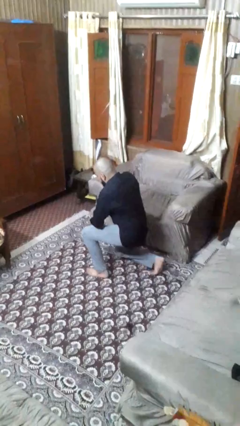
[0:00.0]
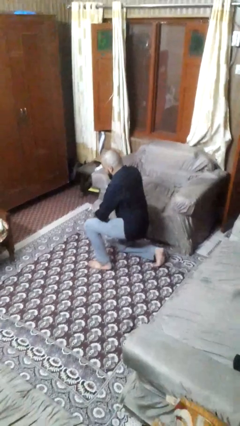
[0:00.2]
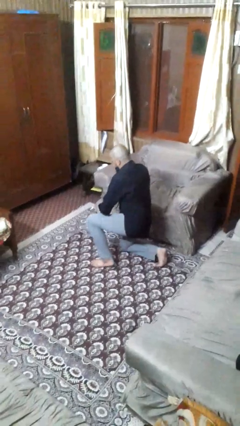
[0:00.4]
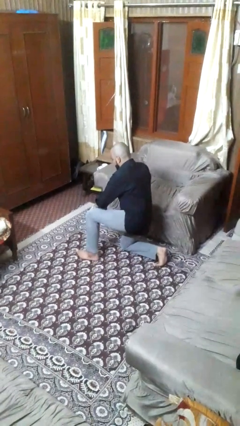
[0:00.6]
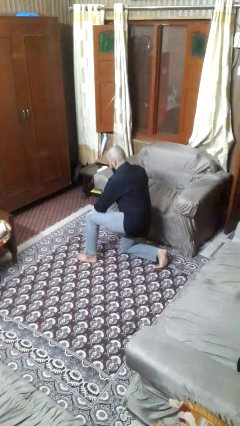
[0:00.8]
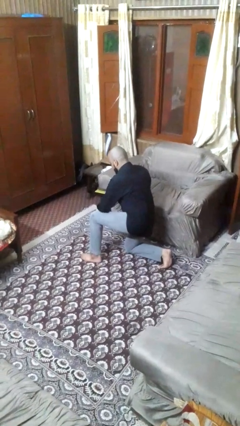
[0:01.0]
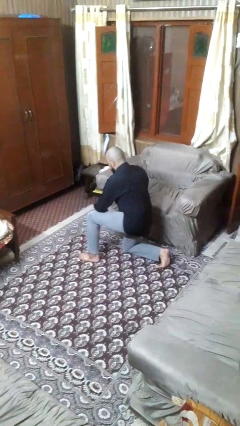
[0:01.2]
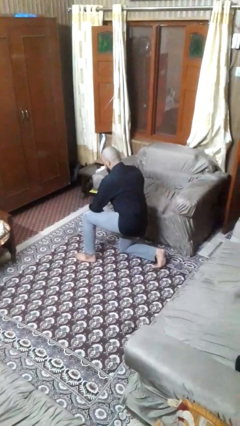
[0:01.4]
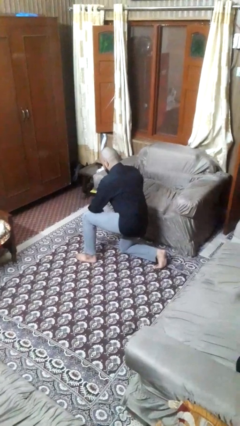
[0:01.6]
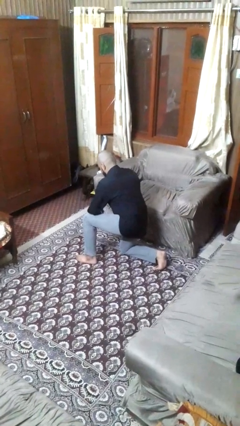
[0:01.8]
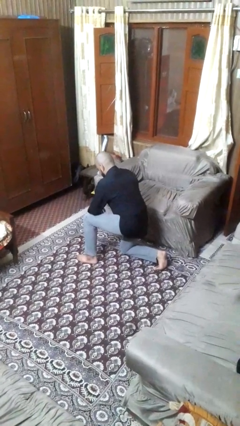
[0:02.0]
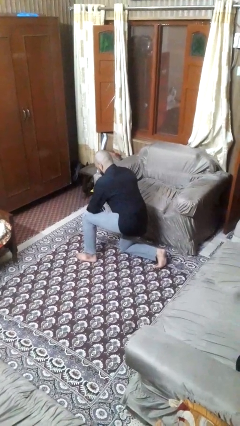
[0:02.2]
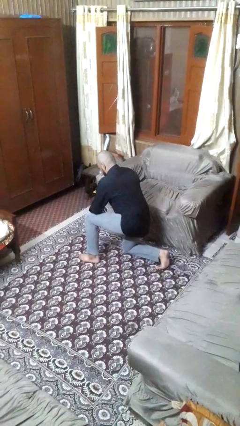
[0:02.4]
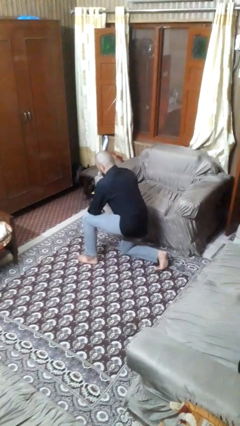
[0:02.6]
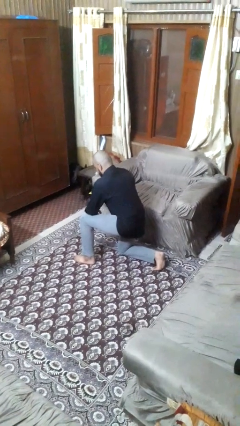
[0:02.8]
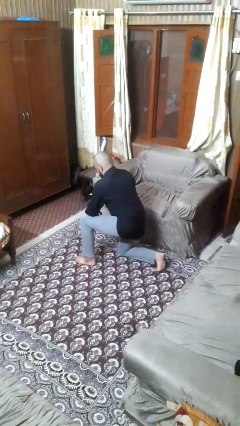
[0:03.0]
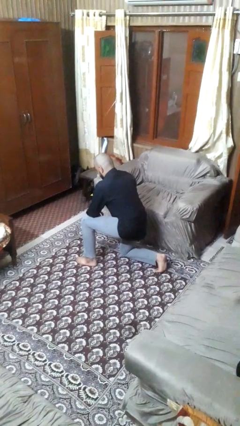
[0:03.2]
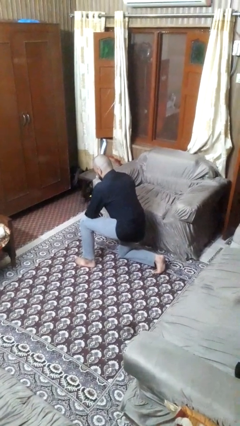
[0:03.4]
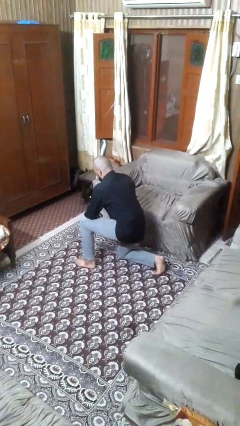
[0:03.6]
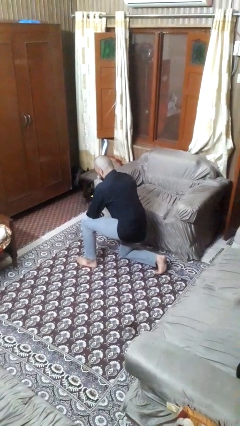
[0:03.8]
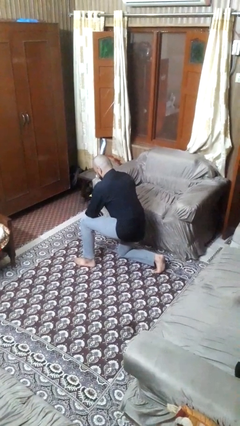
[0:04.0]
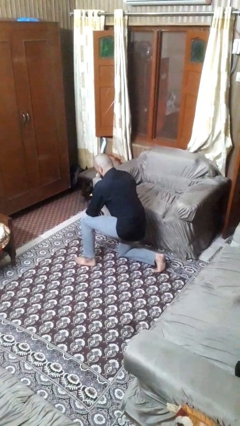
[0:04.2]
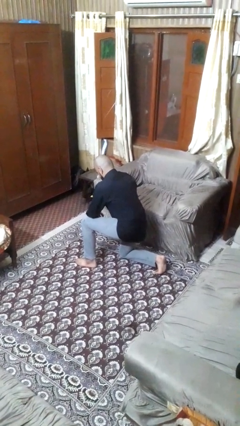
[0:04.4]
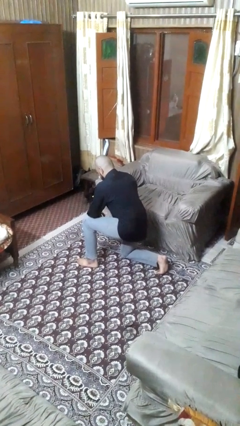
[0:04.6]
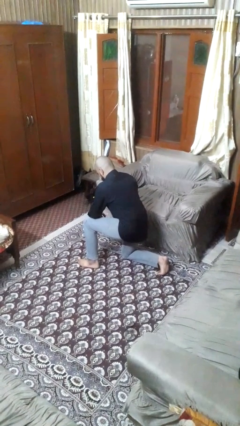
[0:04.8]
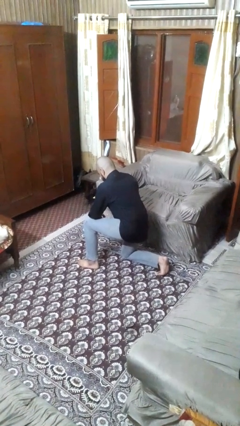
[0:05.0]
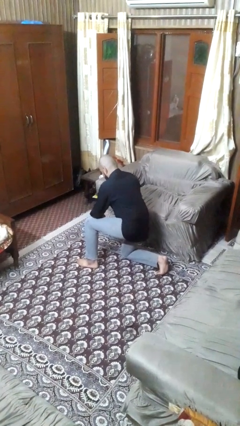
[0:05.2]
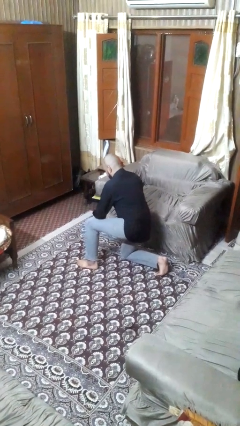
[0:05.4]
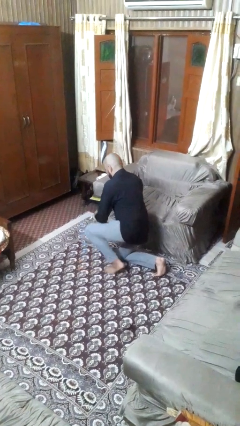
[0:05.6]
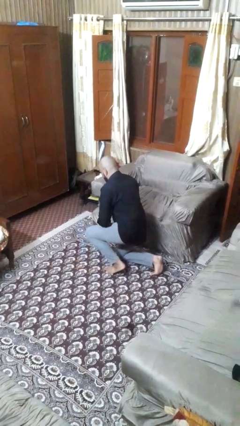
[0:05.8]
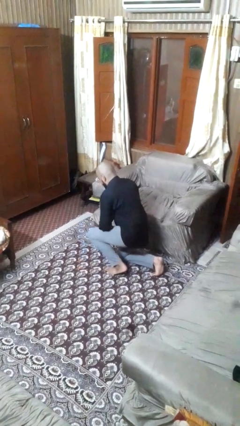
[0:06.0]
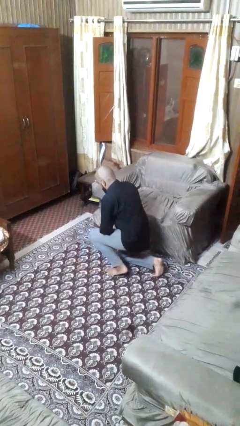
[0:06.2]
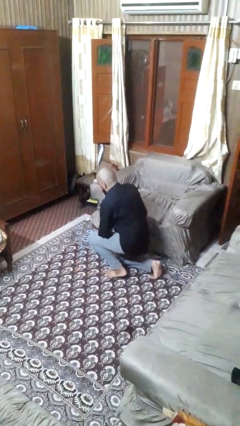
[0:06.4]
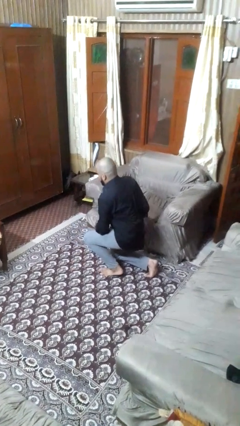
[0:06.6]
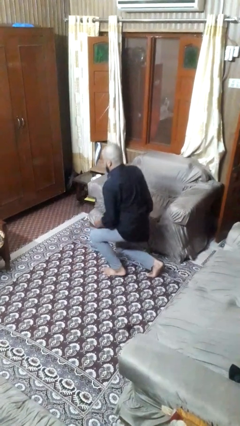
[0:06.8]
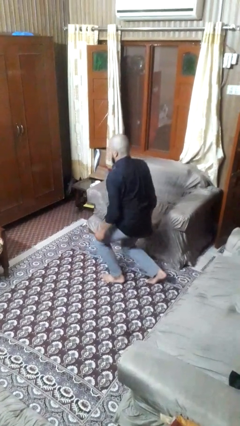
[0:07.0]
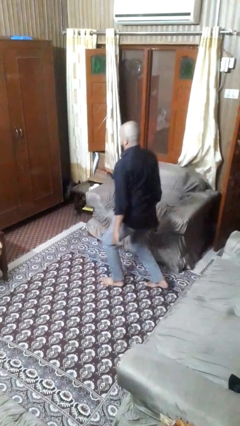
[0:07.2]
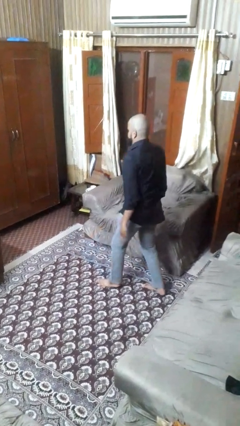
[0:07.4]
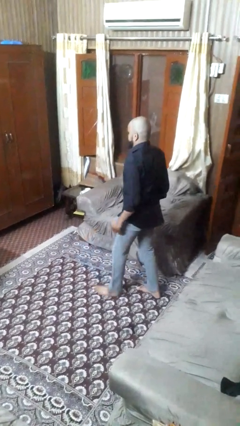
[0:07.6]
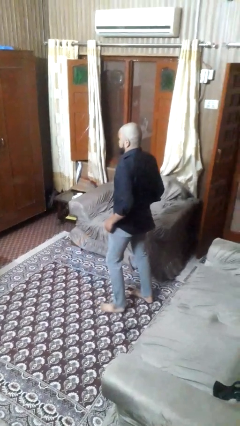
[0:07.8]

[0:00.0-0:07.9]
person kneels

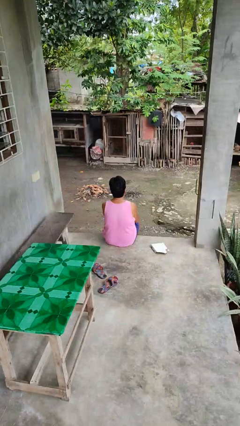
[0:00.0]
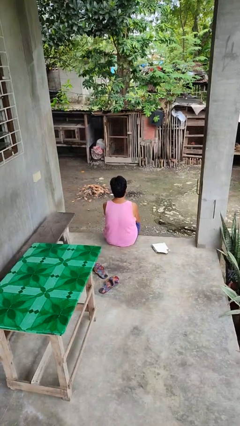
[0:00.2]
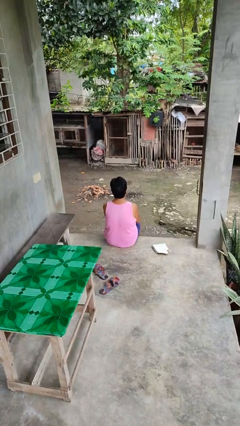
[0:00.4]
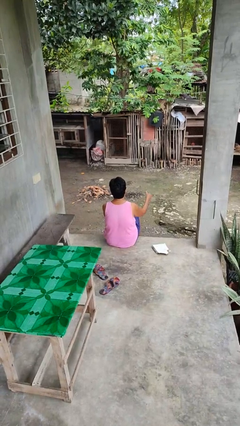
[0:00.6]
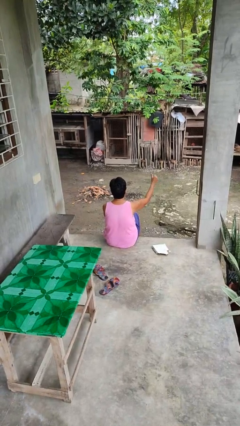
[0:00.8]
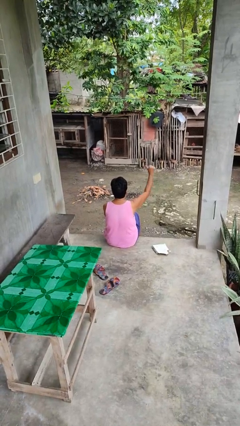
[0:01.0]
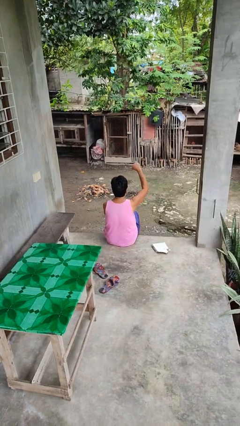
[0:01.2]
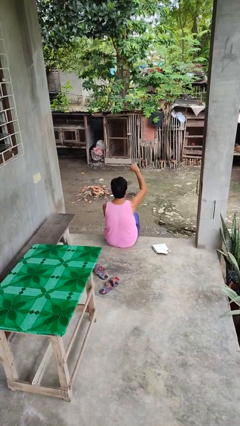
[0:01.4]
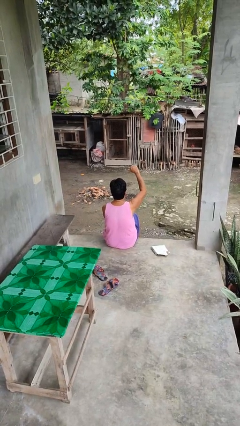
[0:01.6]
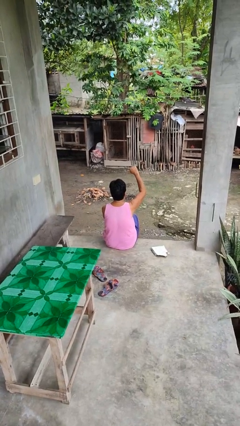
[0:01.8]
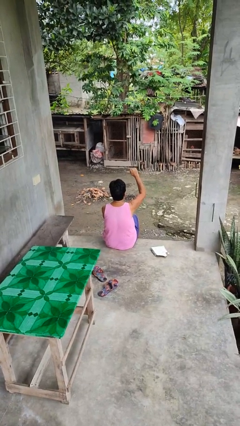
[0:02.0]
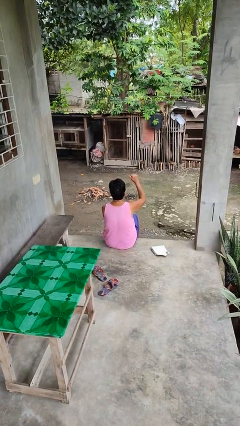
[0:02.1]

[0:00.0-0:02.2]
person gestures thumbs down

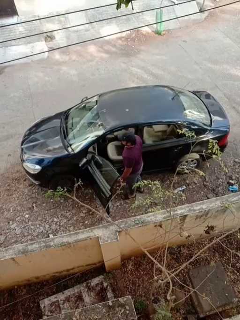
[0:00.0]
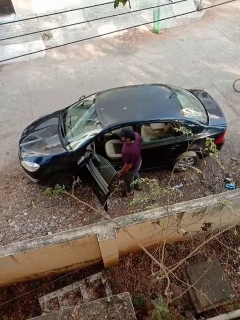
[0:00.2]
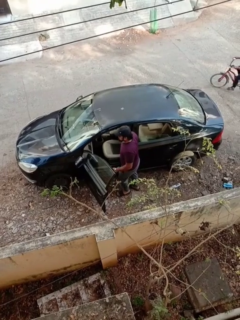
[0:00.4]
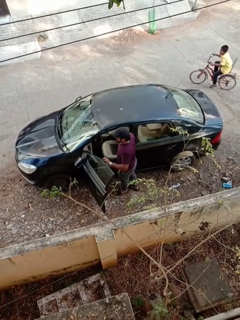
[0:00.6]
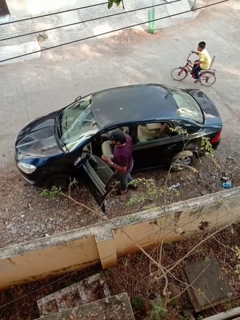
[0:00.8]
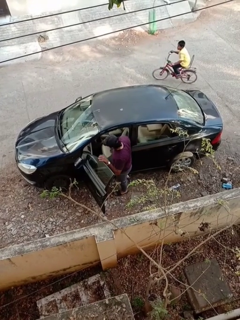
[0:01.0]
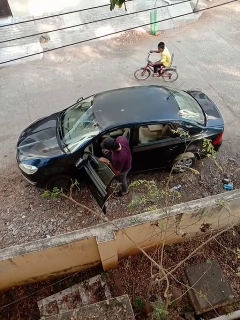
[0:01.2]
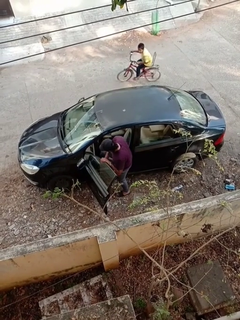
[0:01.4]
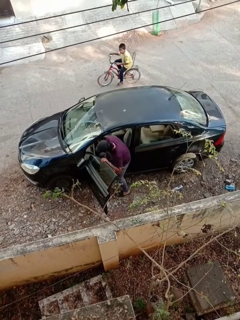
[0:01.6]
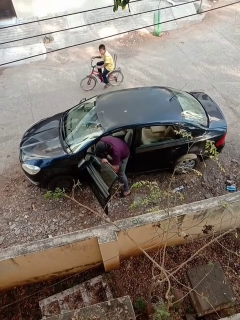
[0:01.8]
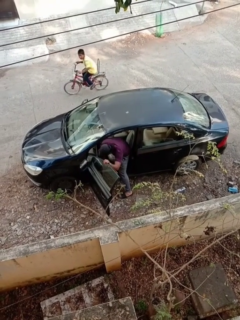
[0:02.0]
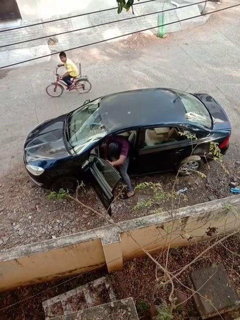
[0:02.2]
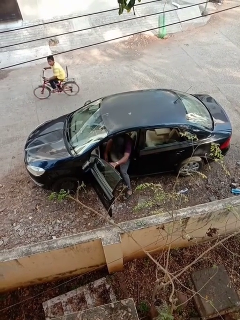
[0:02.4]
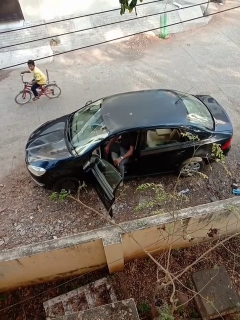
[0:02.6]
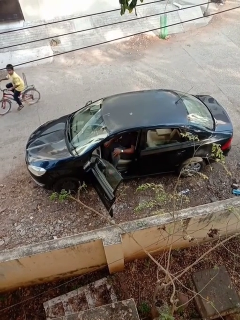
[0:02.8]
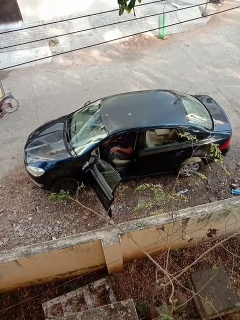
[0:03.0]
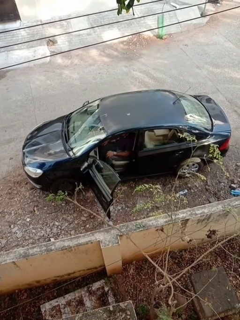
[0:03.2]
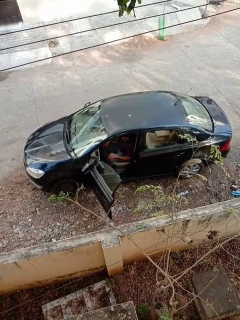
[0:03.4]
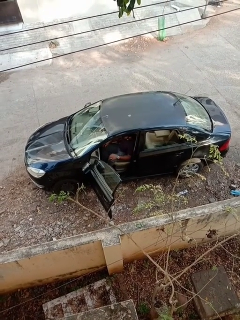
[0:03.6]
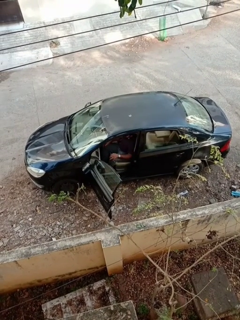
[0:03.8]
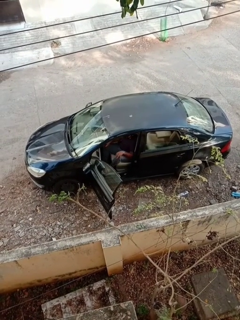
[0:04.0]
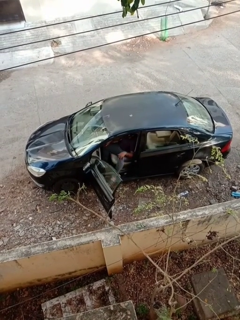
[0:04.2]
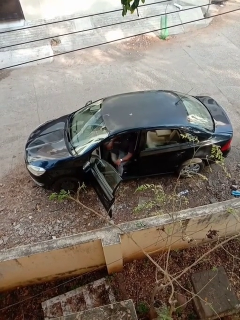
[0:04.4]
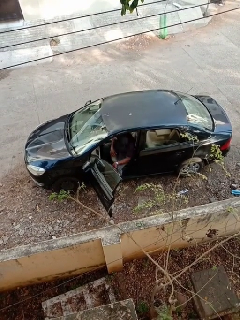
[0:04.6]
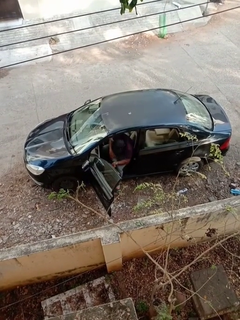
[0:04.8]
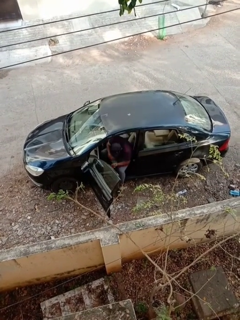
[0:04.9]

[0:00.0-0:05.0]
person enters car

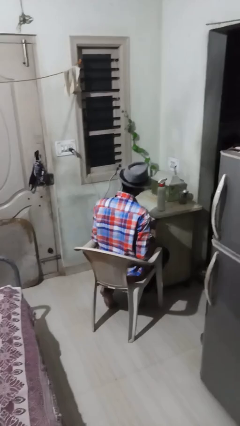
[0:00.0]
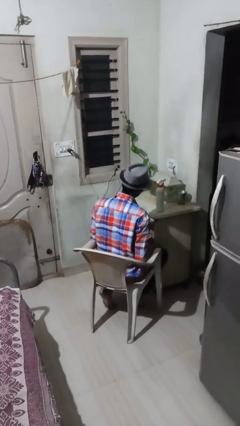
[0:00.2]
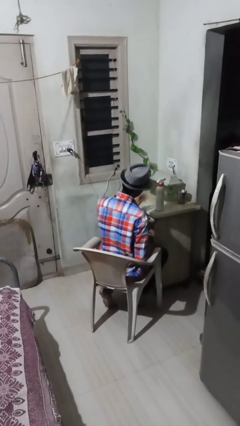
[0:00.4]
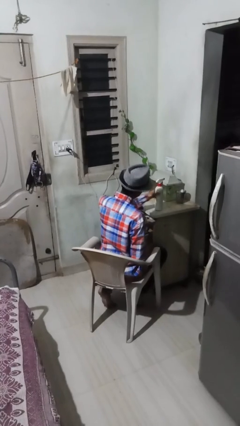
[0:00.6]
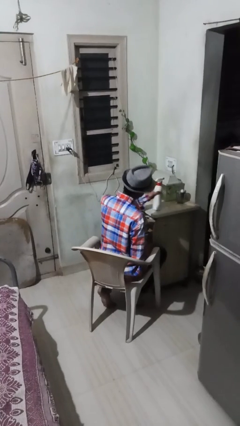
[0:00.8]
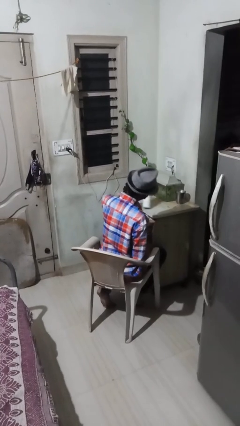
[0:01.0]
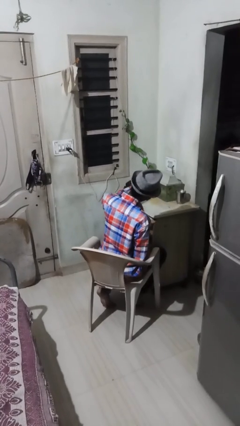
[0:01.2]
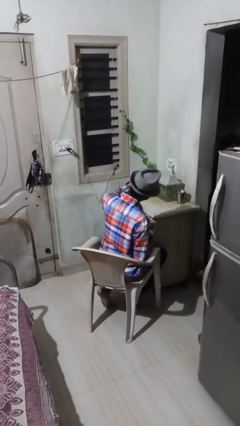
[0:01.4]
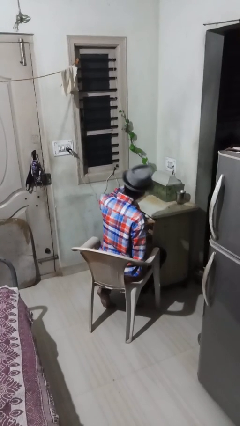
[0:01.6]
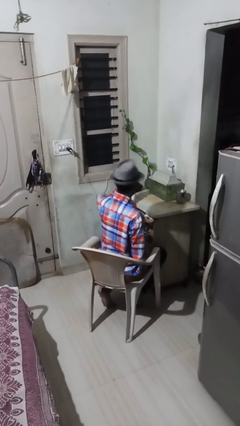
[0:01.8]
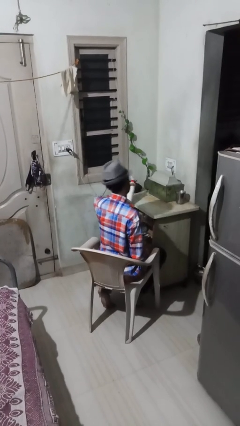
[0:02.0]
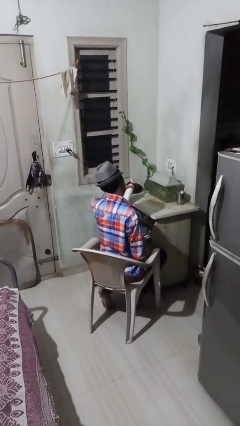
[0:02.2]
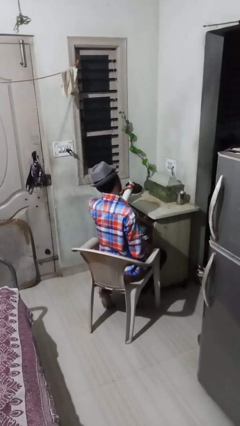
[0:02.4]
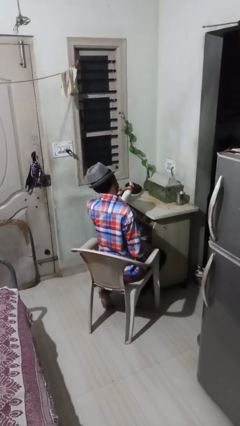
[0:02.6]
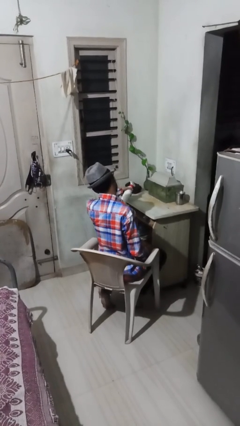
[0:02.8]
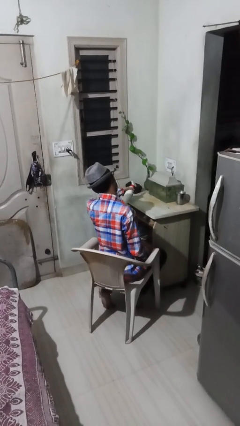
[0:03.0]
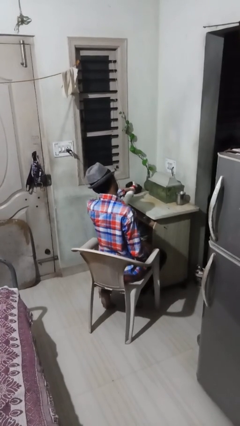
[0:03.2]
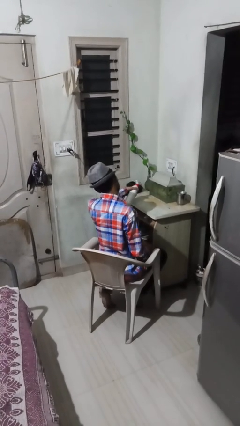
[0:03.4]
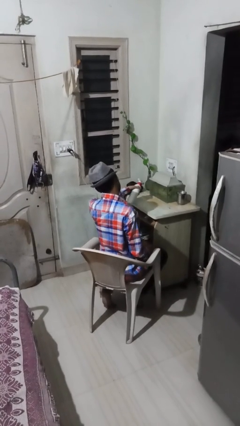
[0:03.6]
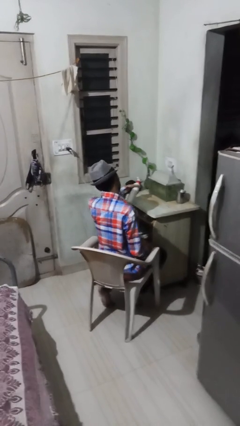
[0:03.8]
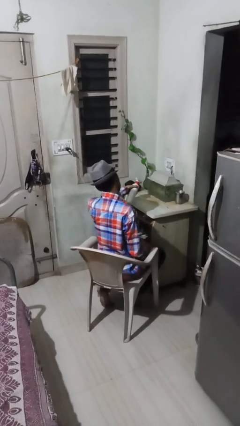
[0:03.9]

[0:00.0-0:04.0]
person sprays from bottle
